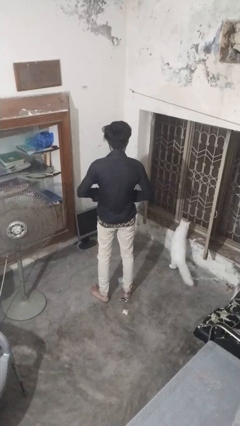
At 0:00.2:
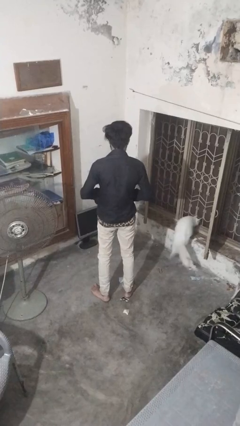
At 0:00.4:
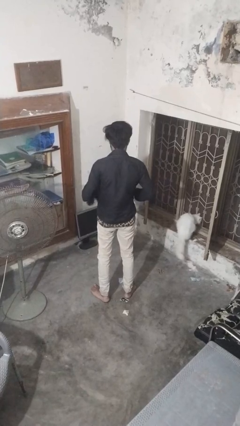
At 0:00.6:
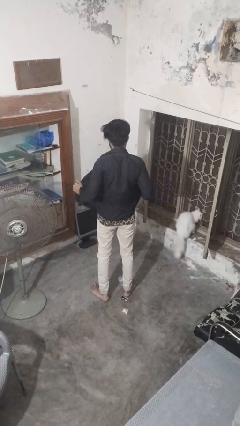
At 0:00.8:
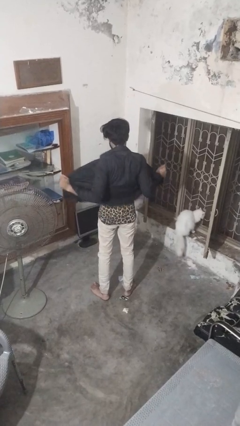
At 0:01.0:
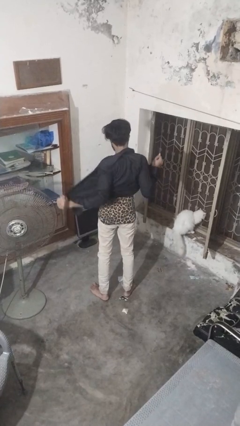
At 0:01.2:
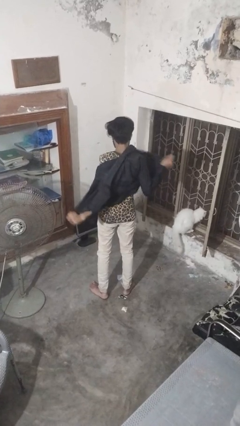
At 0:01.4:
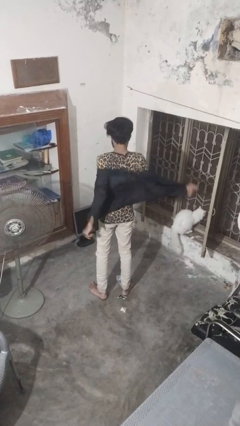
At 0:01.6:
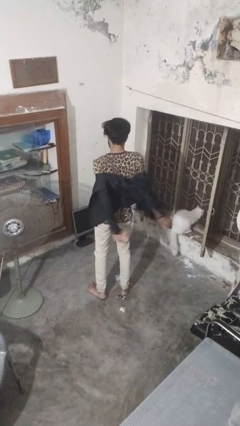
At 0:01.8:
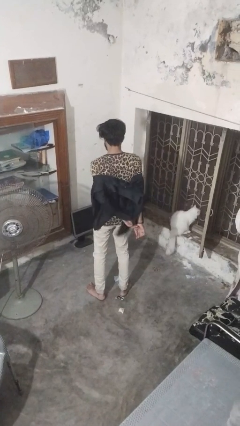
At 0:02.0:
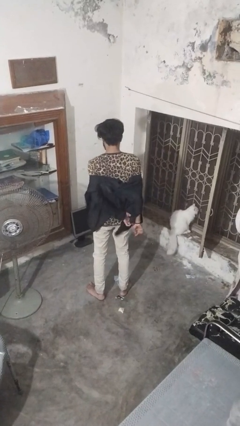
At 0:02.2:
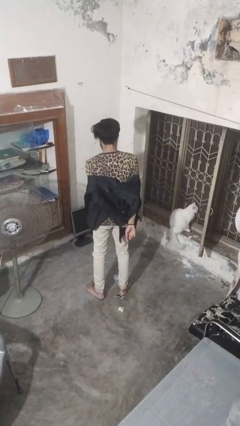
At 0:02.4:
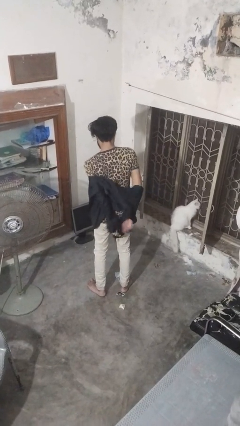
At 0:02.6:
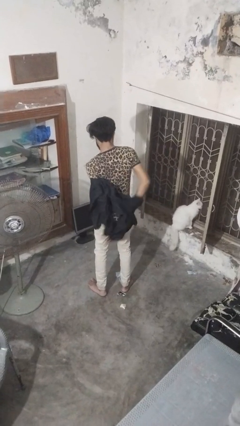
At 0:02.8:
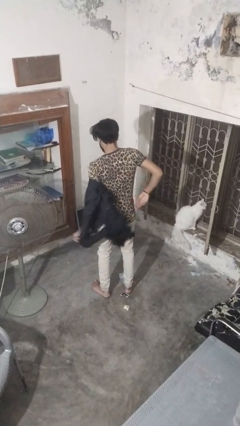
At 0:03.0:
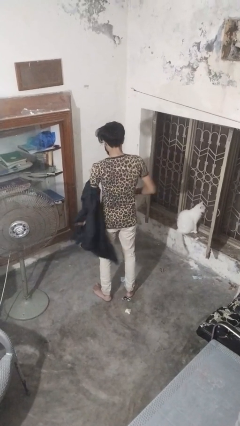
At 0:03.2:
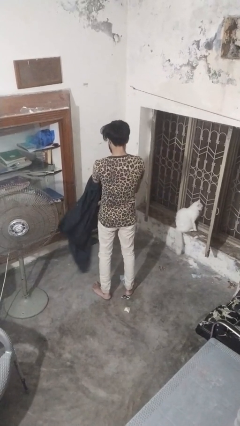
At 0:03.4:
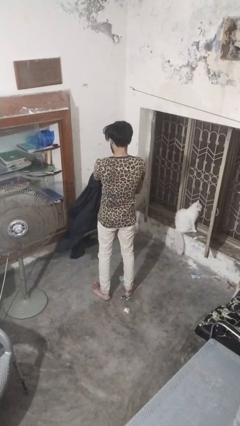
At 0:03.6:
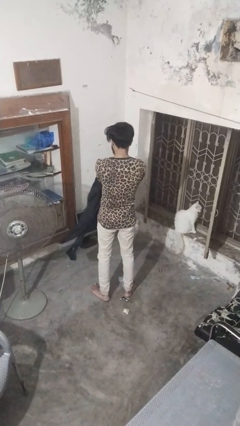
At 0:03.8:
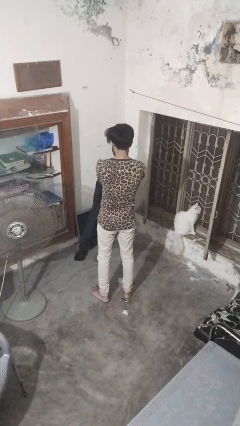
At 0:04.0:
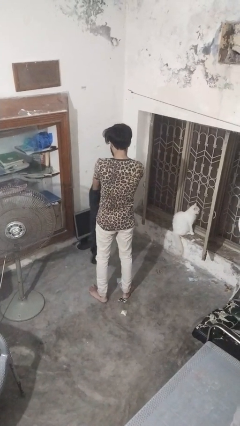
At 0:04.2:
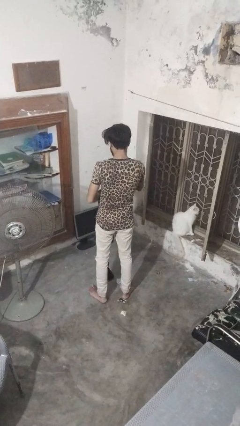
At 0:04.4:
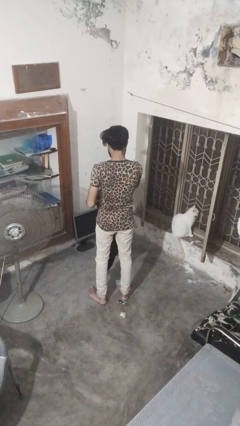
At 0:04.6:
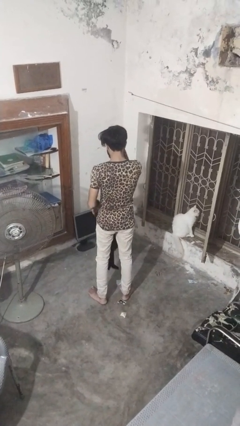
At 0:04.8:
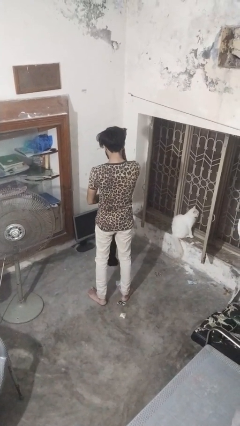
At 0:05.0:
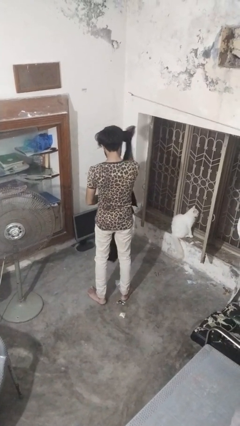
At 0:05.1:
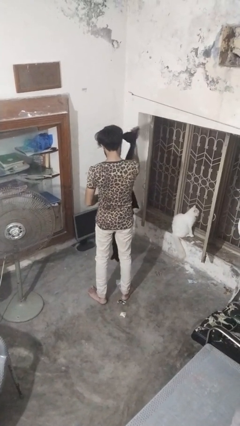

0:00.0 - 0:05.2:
person takes off shirt

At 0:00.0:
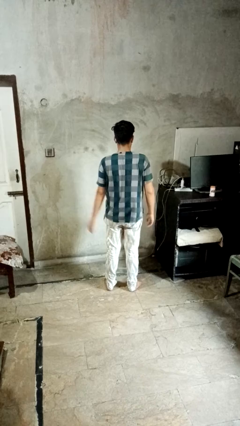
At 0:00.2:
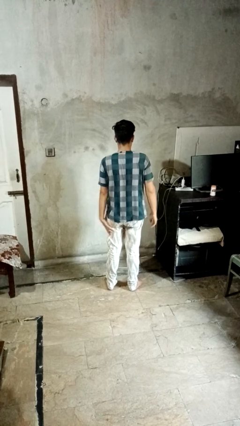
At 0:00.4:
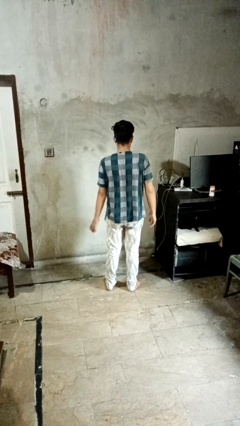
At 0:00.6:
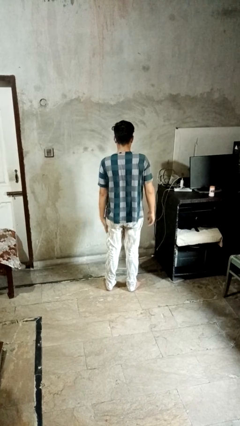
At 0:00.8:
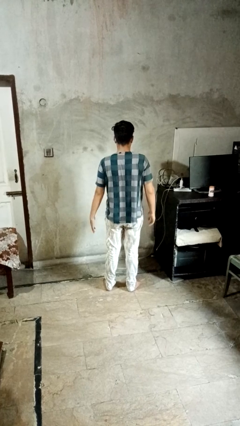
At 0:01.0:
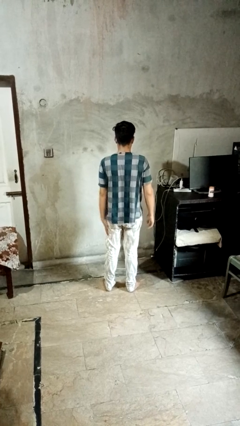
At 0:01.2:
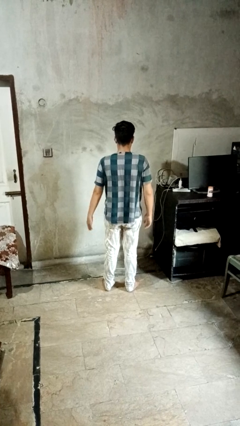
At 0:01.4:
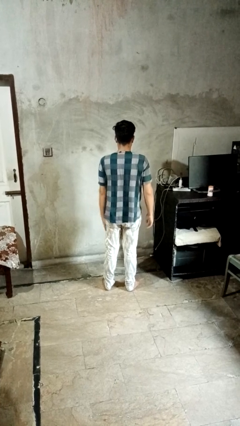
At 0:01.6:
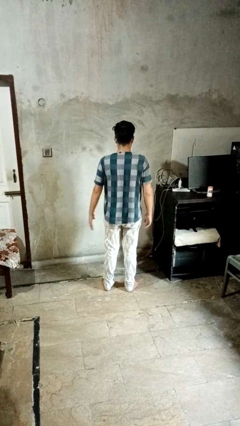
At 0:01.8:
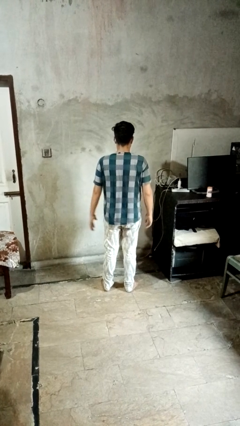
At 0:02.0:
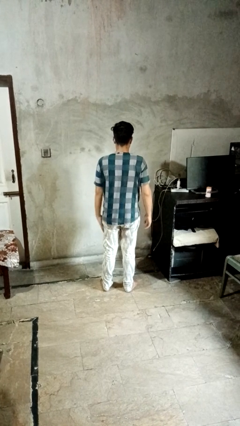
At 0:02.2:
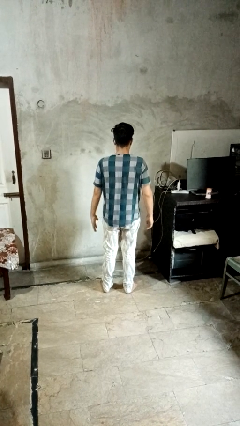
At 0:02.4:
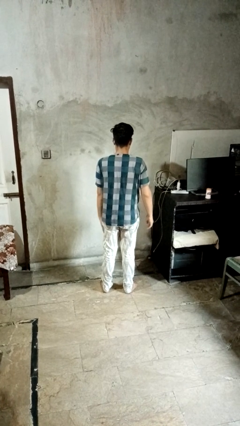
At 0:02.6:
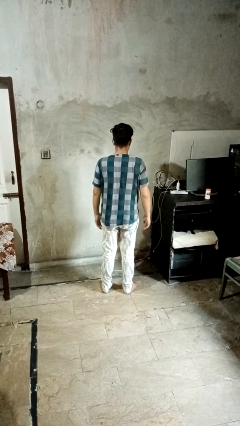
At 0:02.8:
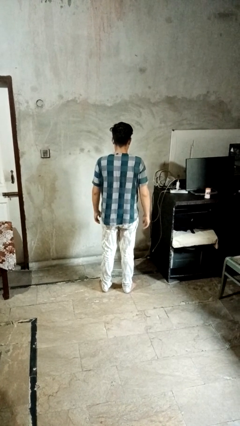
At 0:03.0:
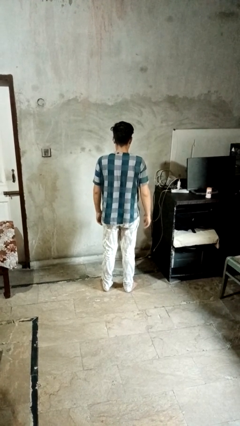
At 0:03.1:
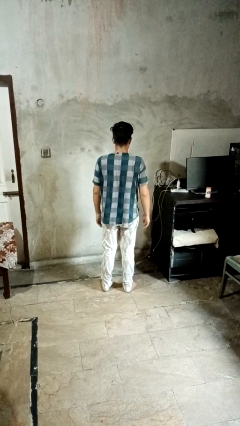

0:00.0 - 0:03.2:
person slaps hands on thighs

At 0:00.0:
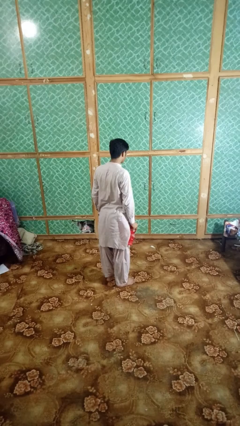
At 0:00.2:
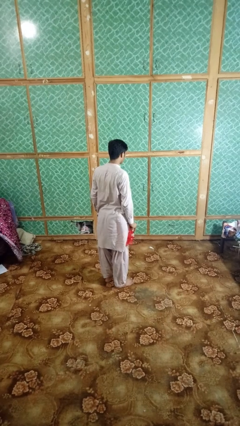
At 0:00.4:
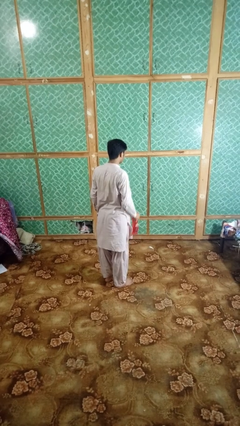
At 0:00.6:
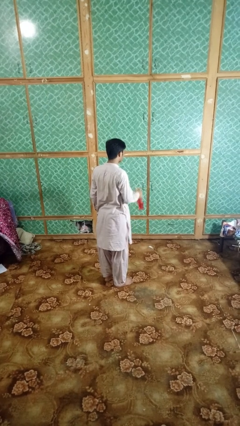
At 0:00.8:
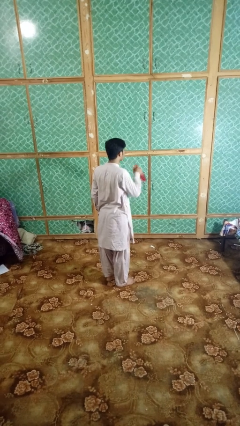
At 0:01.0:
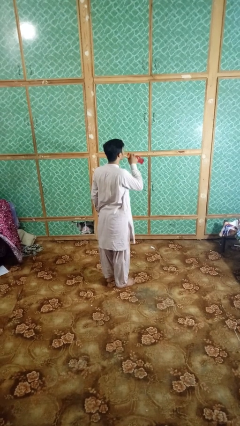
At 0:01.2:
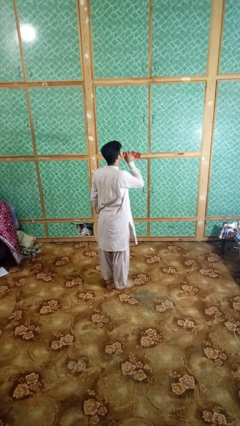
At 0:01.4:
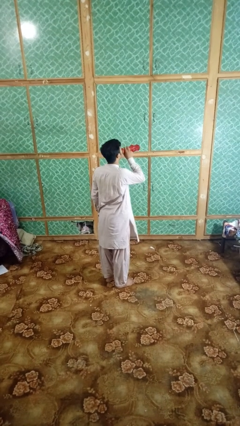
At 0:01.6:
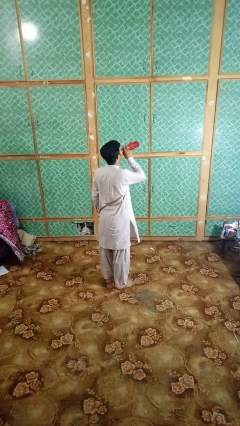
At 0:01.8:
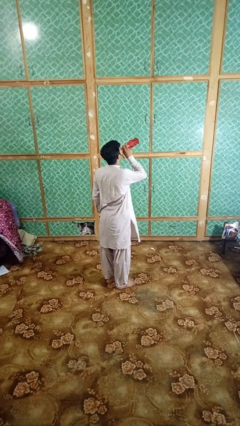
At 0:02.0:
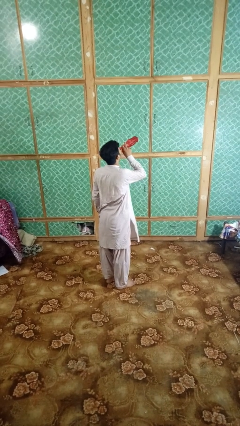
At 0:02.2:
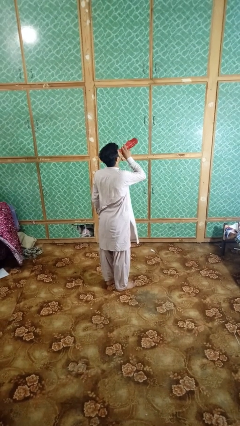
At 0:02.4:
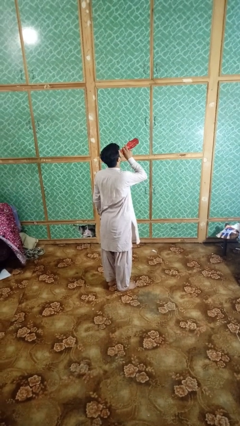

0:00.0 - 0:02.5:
person drinks from bottle

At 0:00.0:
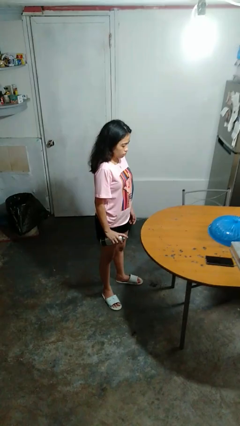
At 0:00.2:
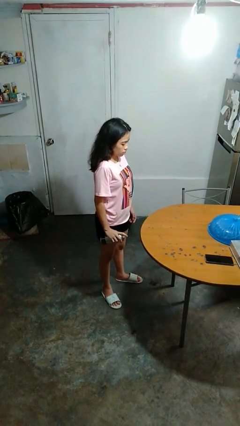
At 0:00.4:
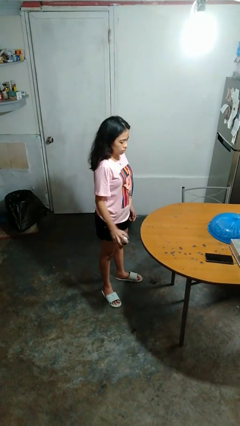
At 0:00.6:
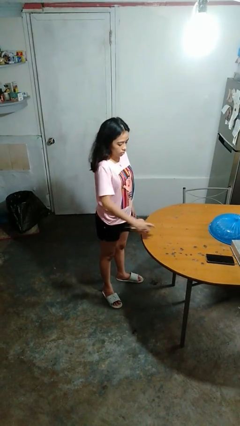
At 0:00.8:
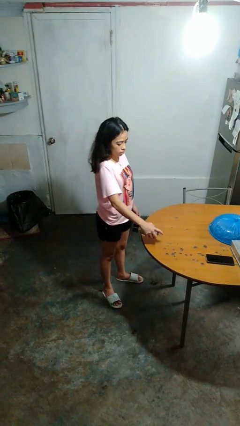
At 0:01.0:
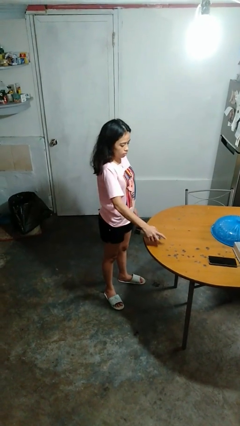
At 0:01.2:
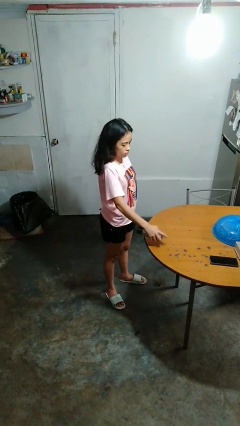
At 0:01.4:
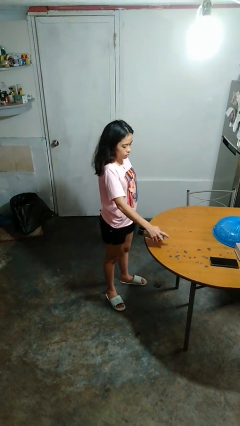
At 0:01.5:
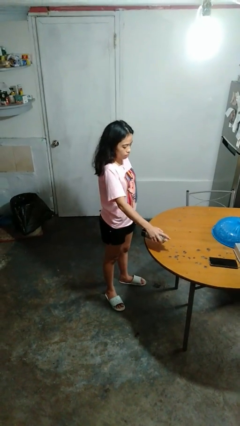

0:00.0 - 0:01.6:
person sprays from bottle

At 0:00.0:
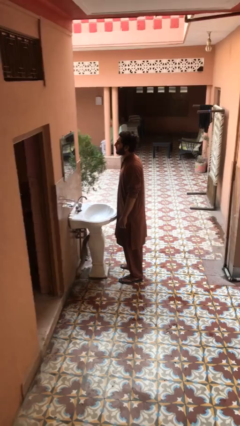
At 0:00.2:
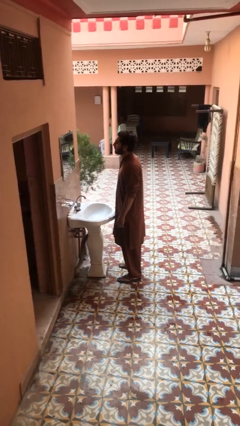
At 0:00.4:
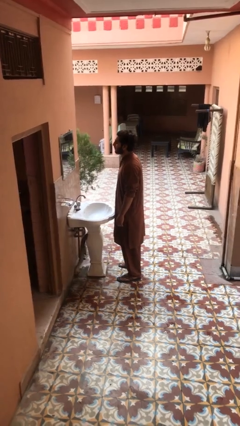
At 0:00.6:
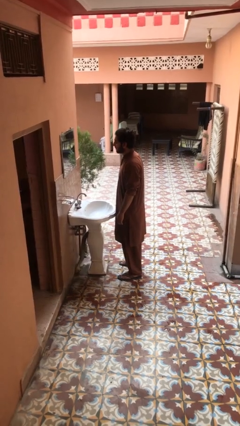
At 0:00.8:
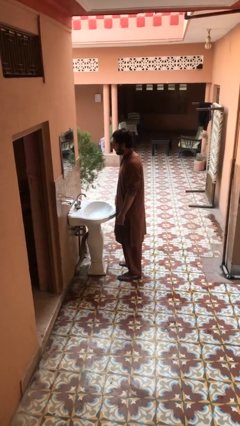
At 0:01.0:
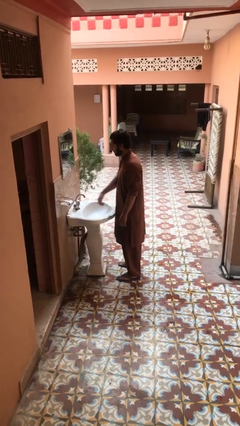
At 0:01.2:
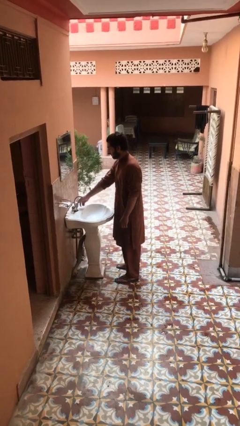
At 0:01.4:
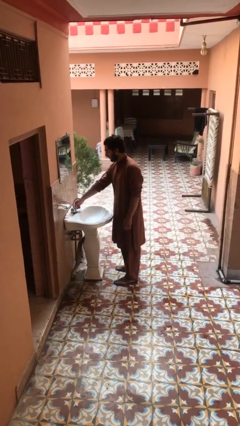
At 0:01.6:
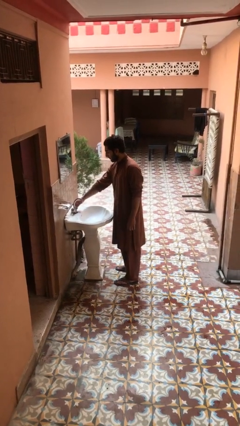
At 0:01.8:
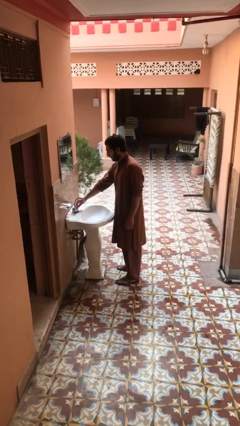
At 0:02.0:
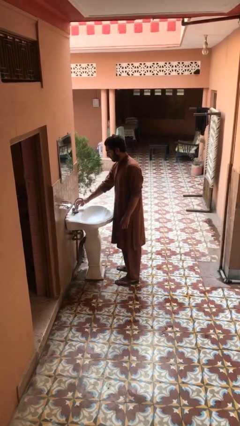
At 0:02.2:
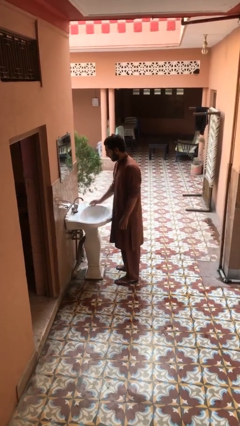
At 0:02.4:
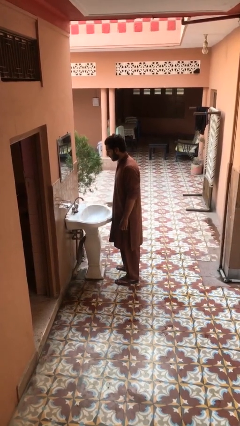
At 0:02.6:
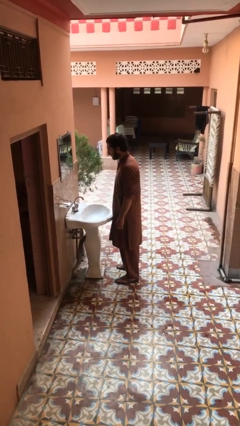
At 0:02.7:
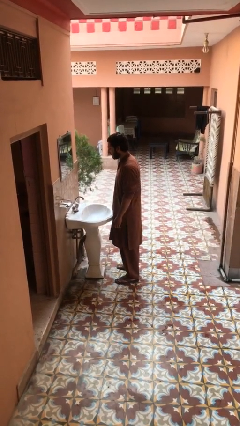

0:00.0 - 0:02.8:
person turns on faucet

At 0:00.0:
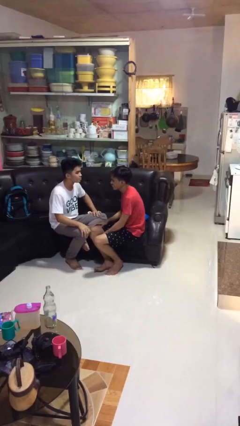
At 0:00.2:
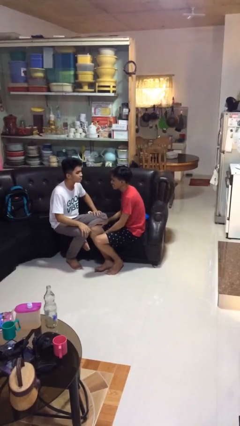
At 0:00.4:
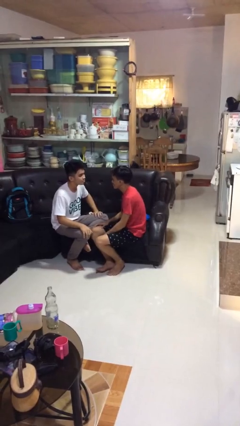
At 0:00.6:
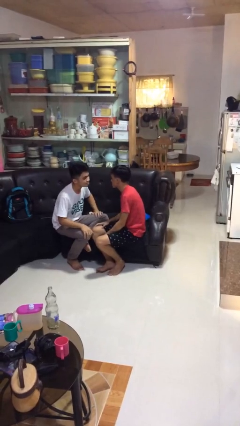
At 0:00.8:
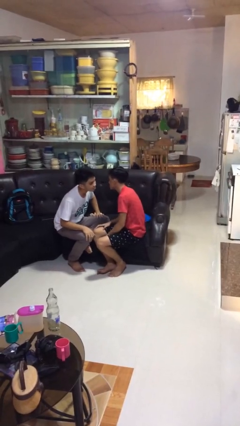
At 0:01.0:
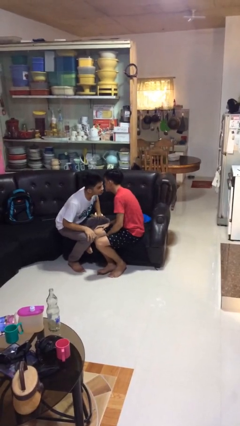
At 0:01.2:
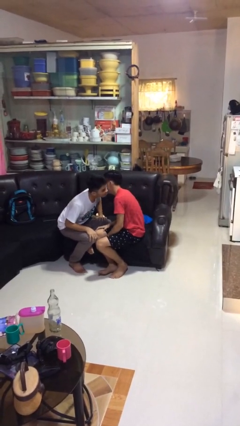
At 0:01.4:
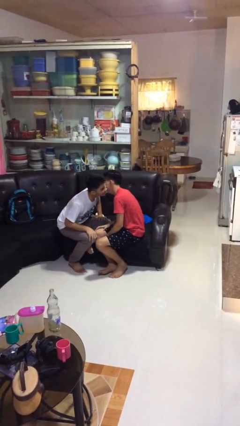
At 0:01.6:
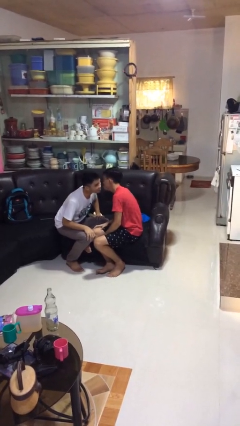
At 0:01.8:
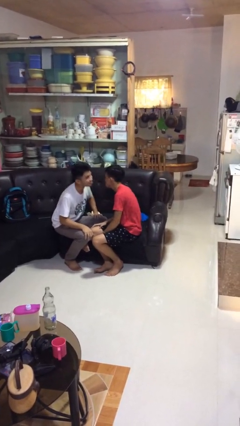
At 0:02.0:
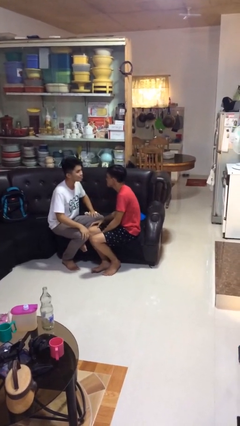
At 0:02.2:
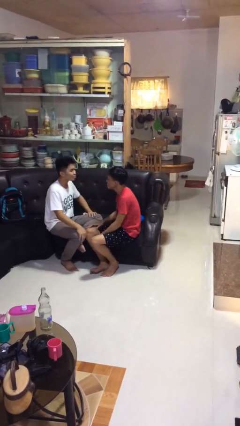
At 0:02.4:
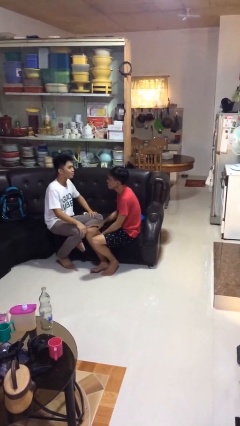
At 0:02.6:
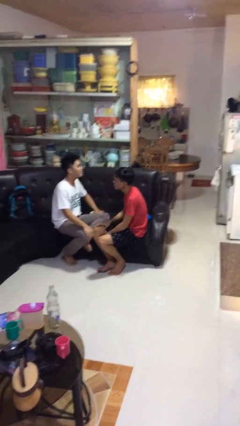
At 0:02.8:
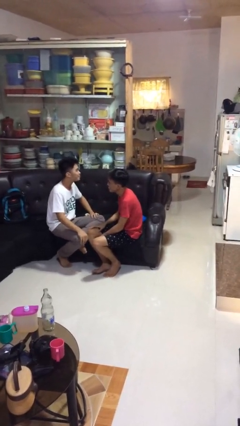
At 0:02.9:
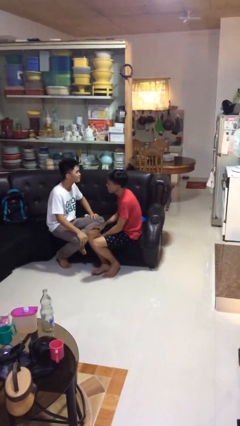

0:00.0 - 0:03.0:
person kisses cheek of person
